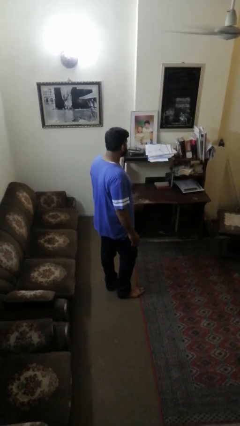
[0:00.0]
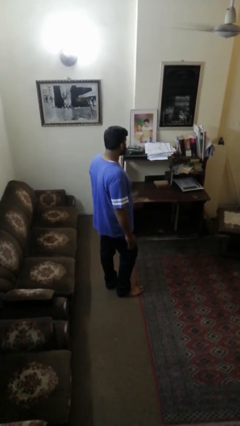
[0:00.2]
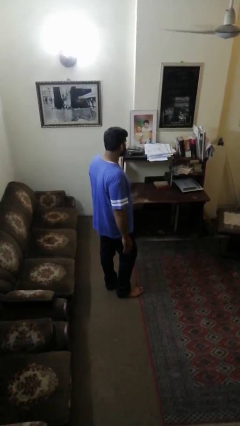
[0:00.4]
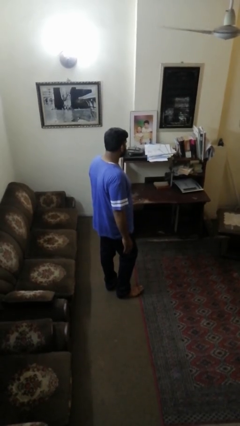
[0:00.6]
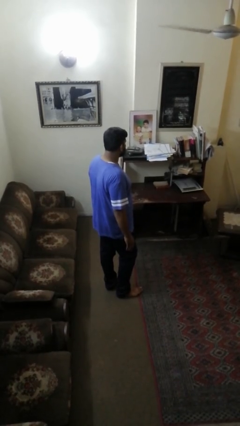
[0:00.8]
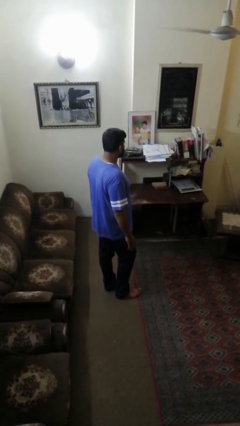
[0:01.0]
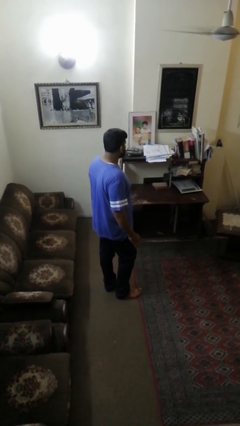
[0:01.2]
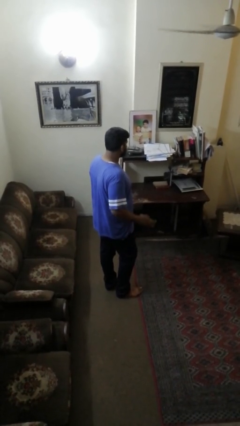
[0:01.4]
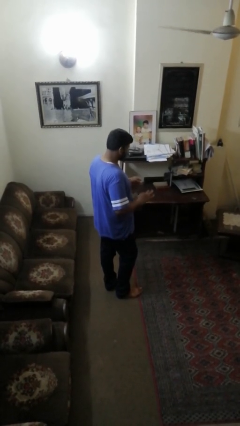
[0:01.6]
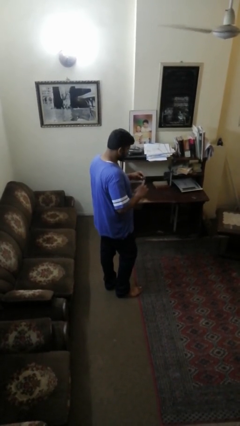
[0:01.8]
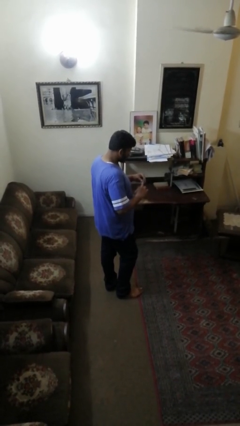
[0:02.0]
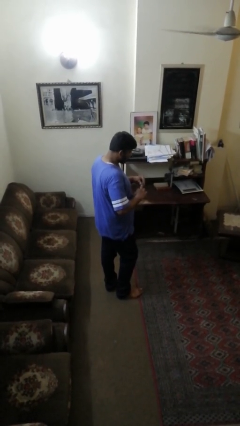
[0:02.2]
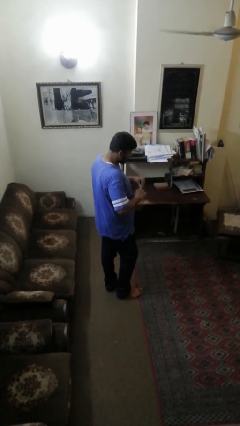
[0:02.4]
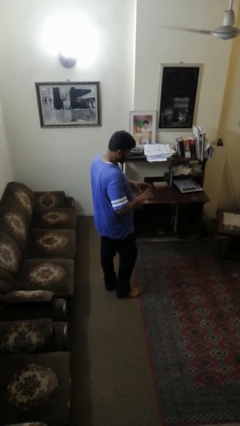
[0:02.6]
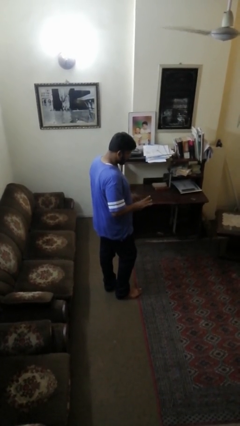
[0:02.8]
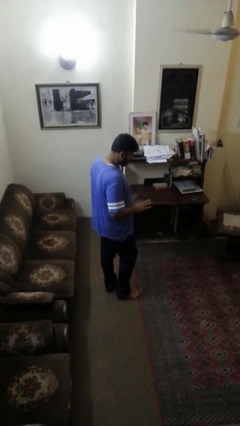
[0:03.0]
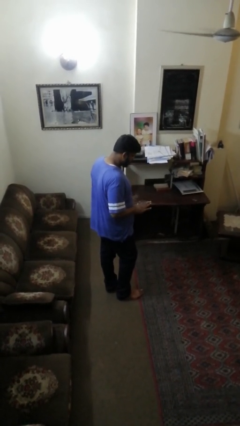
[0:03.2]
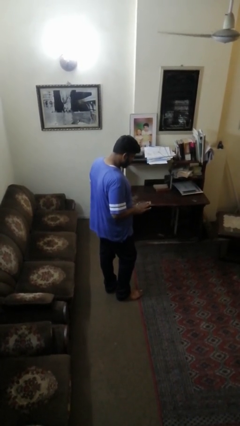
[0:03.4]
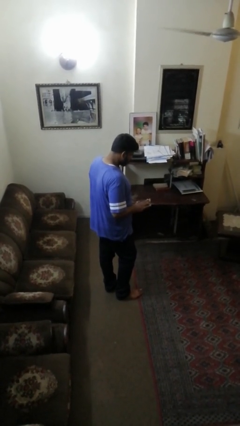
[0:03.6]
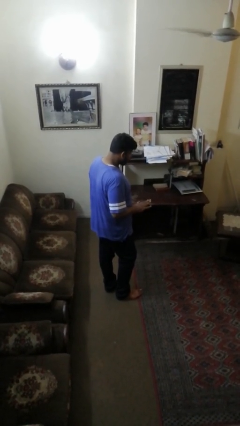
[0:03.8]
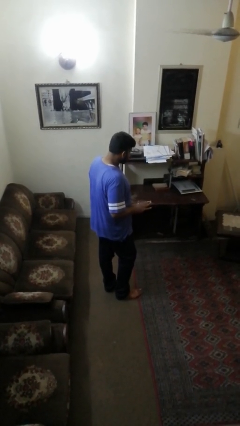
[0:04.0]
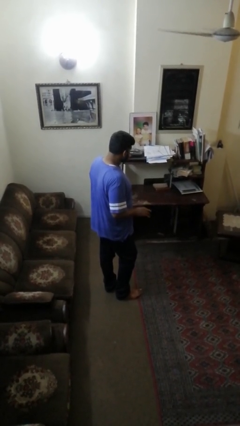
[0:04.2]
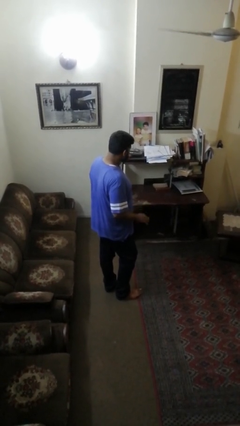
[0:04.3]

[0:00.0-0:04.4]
person puts on ring

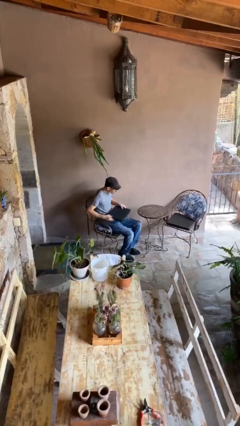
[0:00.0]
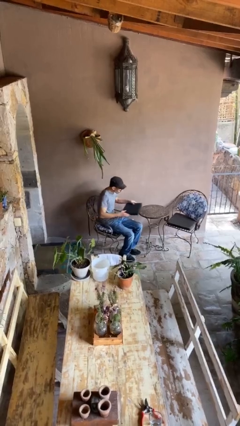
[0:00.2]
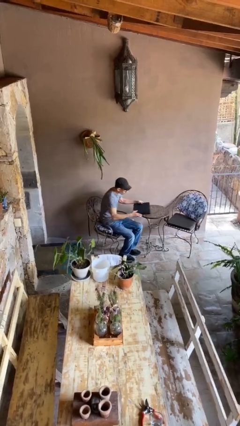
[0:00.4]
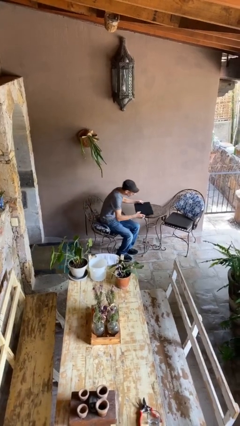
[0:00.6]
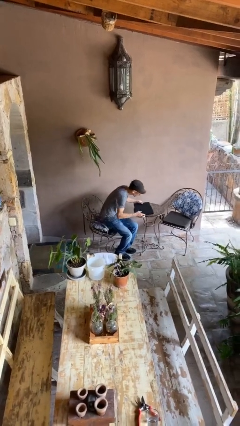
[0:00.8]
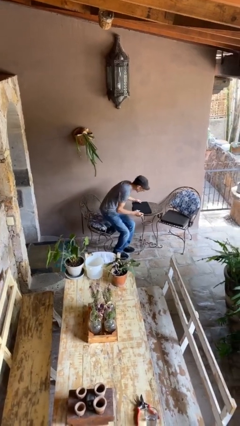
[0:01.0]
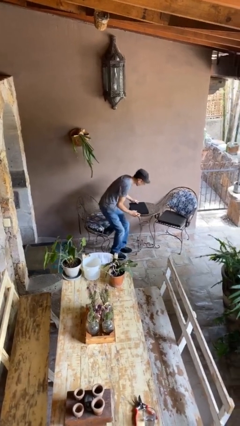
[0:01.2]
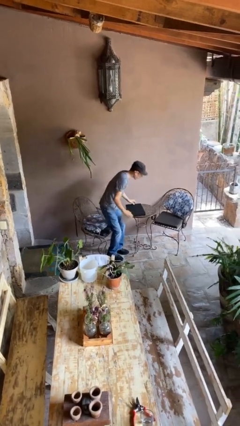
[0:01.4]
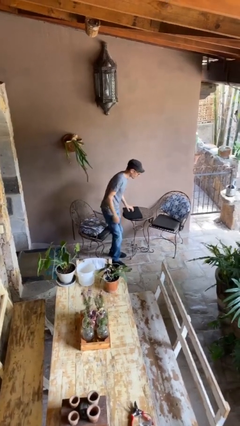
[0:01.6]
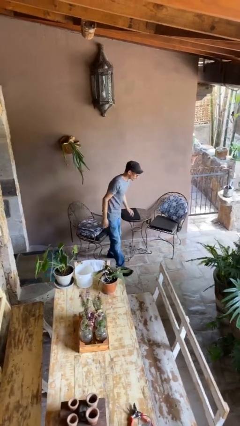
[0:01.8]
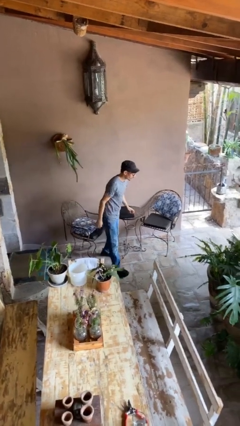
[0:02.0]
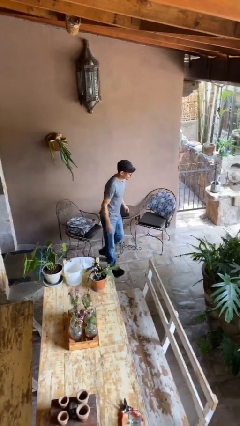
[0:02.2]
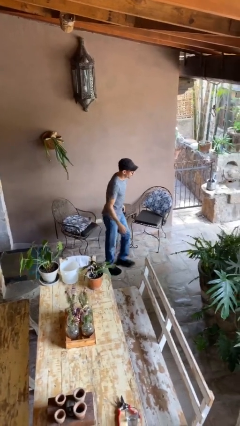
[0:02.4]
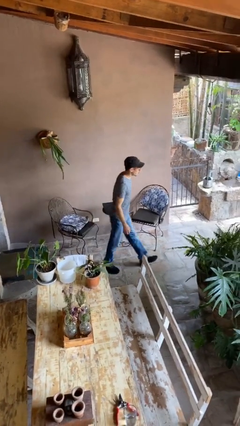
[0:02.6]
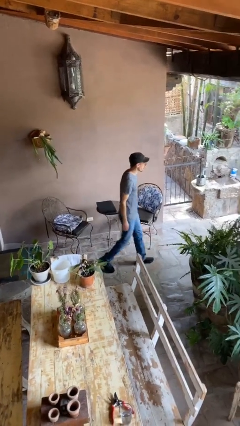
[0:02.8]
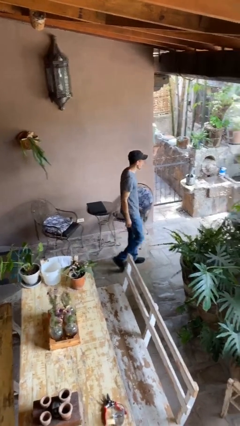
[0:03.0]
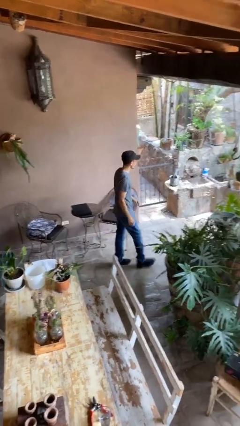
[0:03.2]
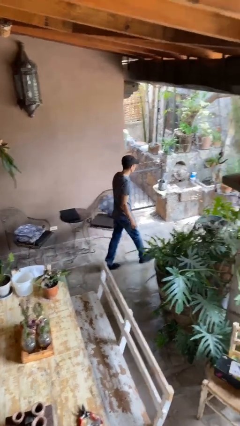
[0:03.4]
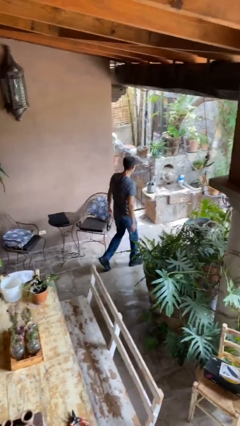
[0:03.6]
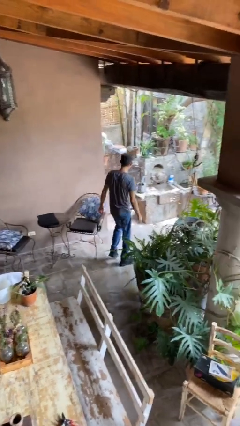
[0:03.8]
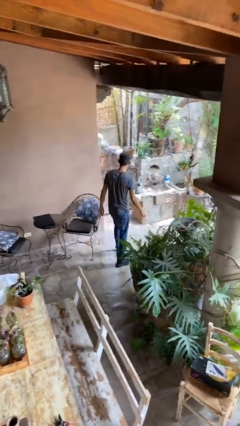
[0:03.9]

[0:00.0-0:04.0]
person stands up

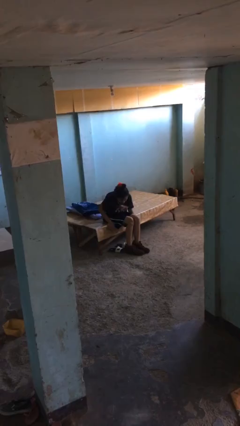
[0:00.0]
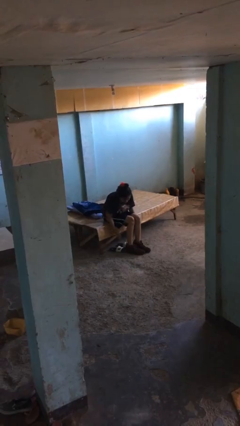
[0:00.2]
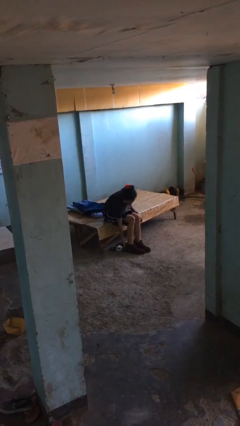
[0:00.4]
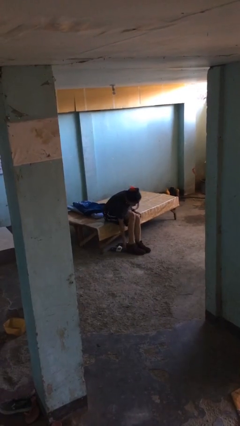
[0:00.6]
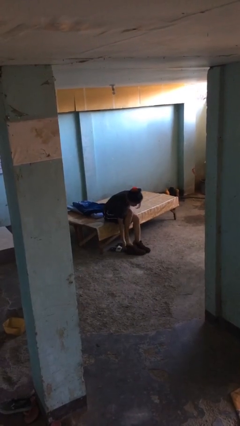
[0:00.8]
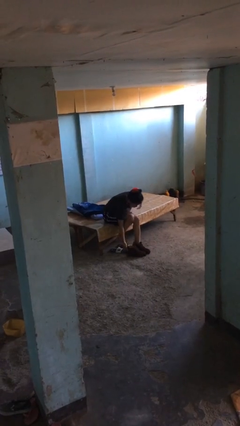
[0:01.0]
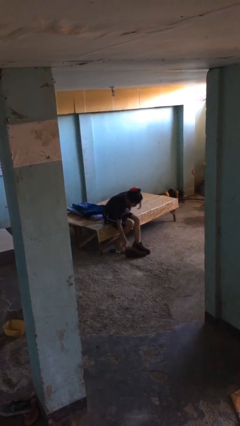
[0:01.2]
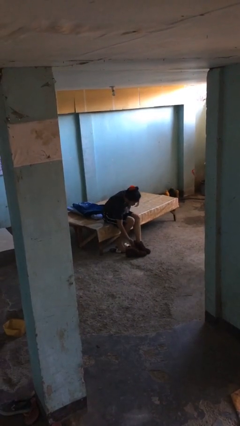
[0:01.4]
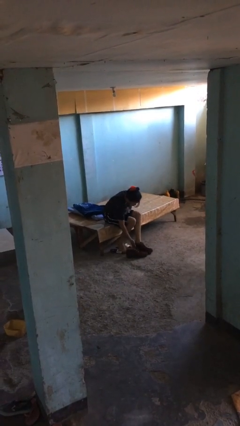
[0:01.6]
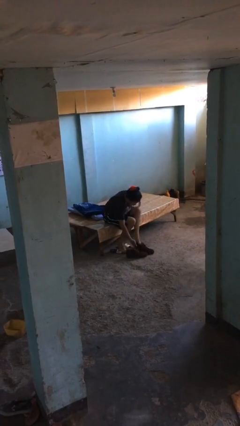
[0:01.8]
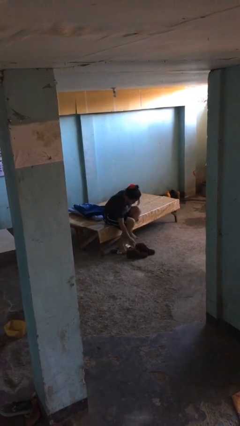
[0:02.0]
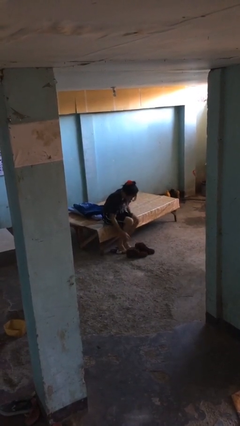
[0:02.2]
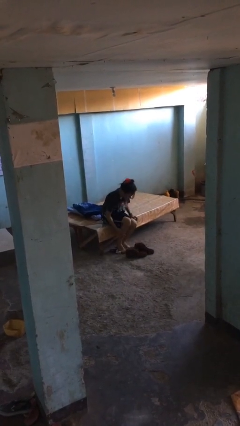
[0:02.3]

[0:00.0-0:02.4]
person takes off boots

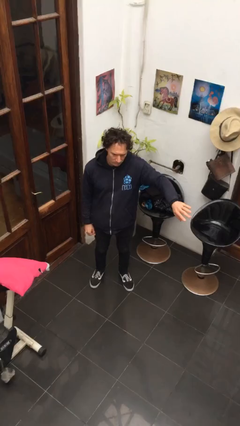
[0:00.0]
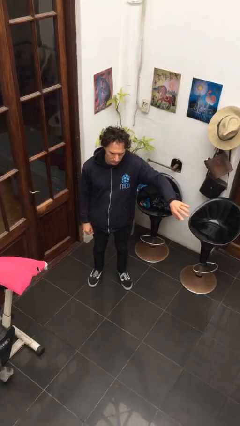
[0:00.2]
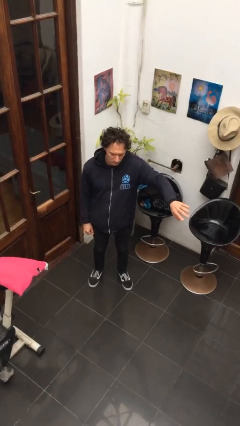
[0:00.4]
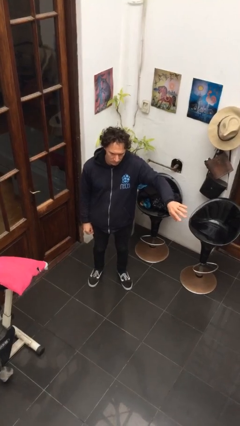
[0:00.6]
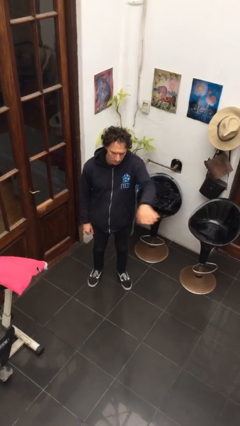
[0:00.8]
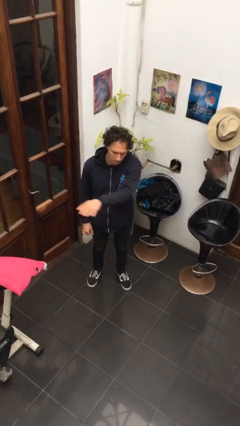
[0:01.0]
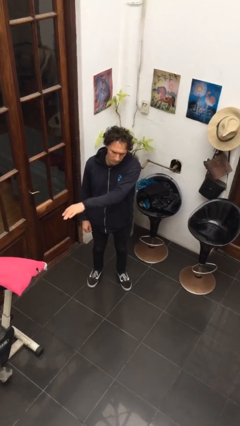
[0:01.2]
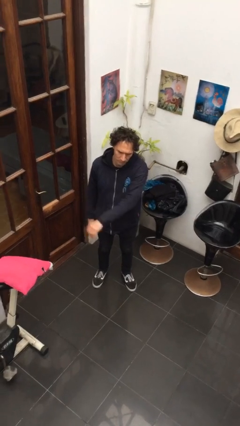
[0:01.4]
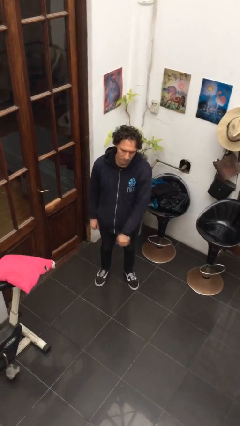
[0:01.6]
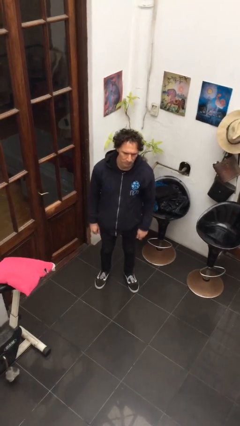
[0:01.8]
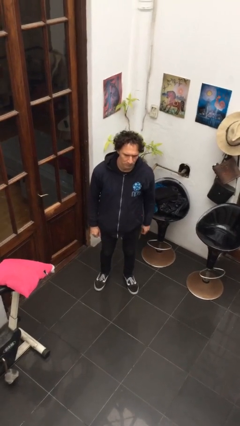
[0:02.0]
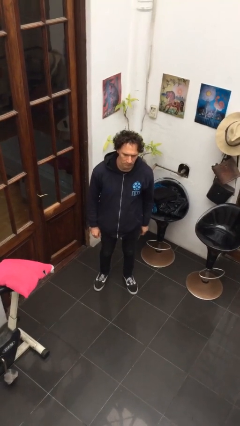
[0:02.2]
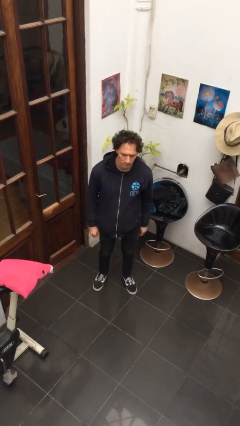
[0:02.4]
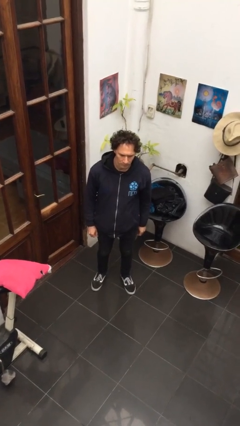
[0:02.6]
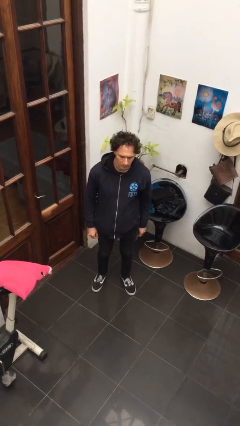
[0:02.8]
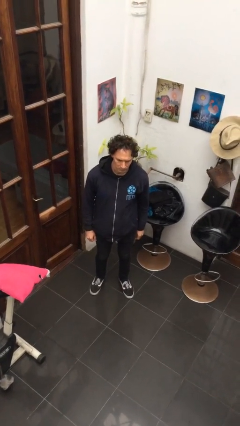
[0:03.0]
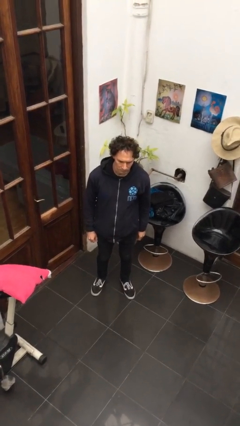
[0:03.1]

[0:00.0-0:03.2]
person gestures swipe right

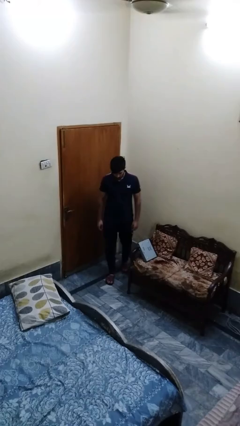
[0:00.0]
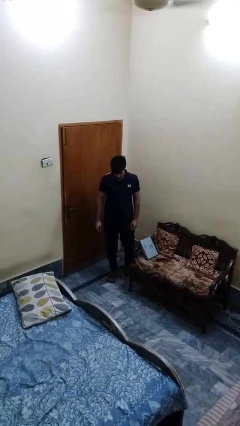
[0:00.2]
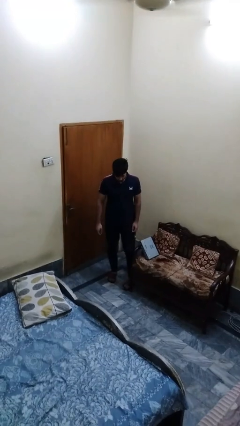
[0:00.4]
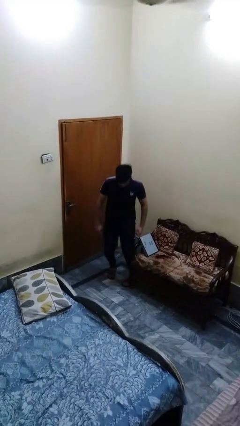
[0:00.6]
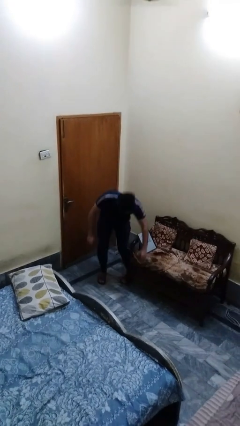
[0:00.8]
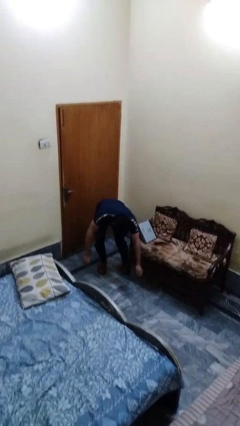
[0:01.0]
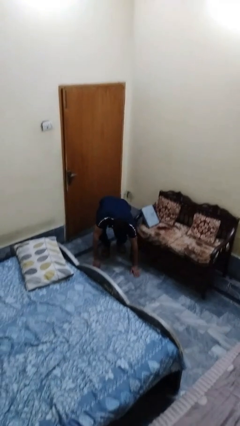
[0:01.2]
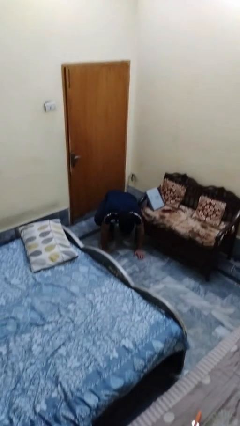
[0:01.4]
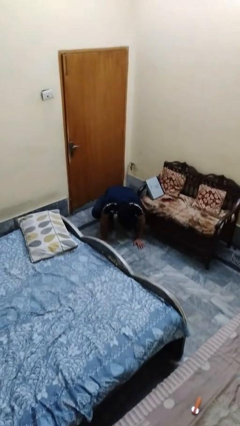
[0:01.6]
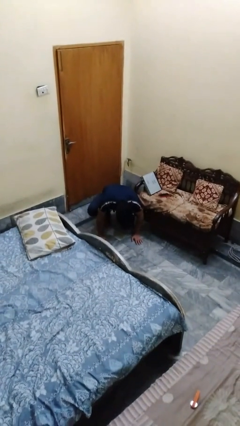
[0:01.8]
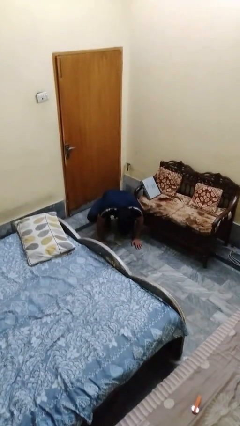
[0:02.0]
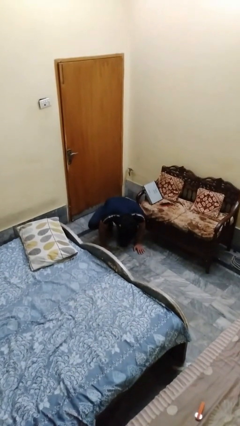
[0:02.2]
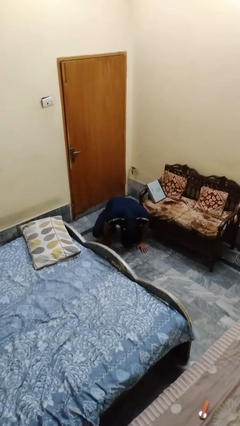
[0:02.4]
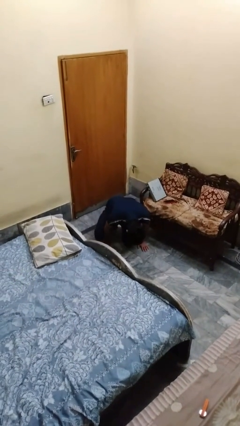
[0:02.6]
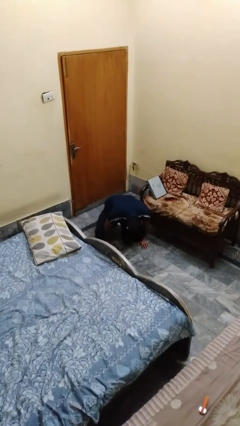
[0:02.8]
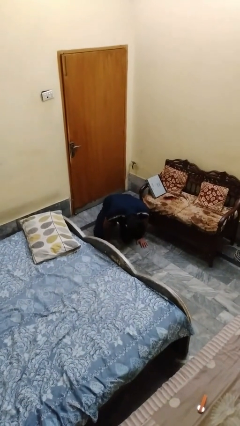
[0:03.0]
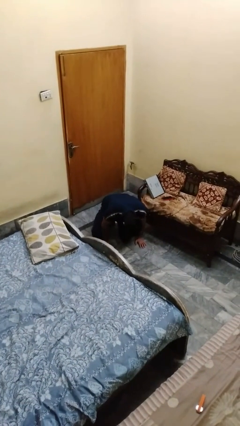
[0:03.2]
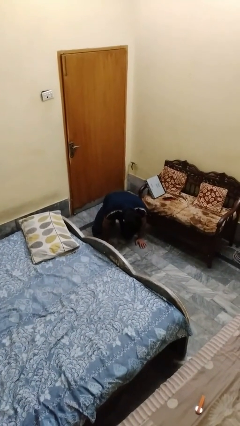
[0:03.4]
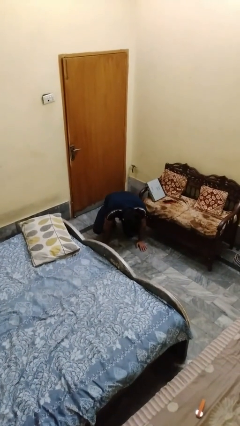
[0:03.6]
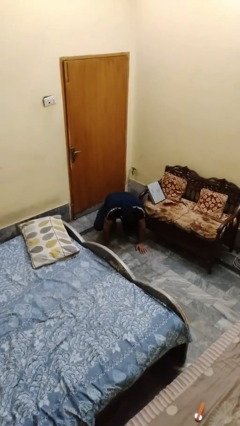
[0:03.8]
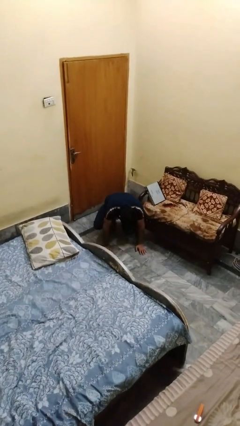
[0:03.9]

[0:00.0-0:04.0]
person trips on object on floor
